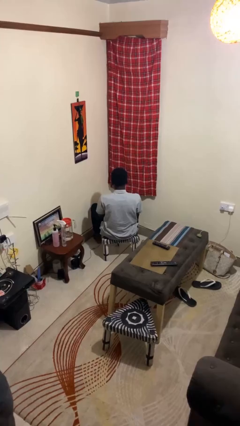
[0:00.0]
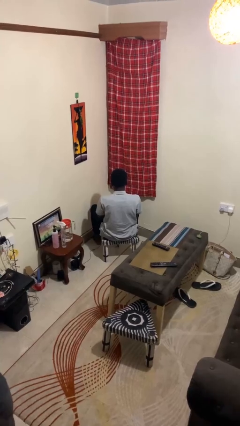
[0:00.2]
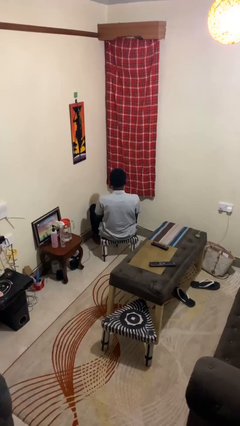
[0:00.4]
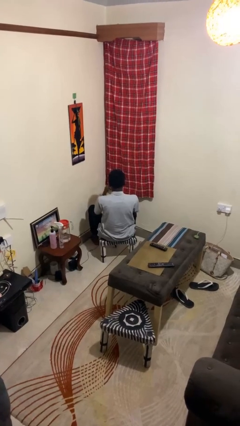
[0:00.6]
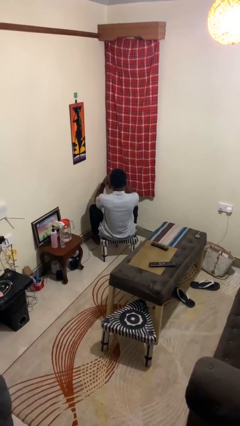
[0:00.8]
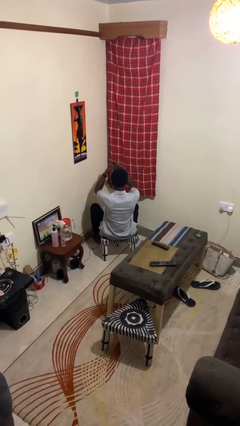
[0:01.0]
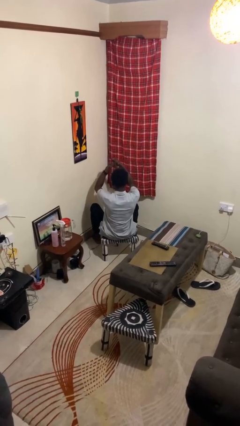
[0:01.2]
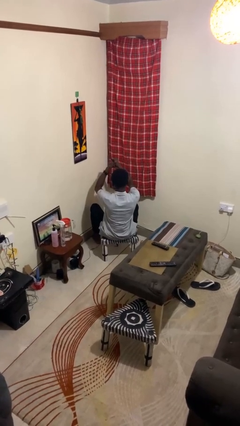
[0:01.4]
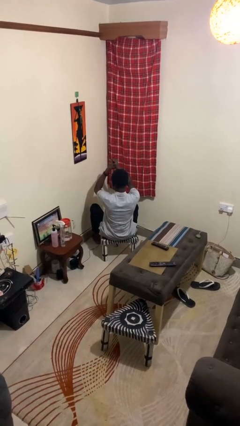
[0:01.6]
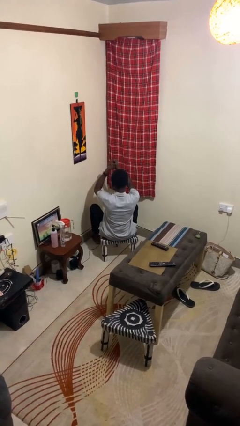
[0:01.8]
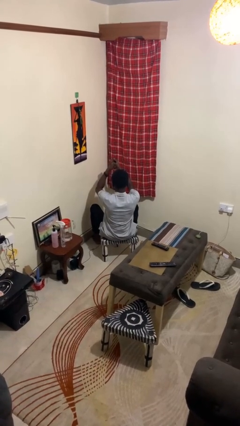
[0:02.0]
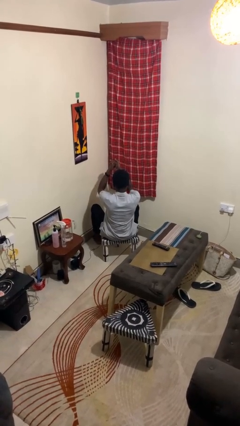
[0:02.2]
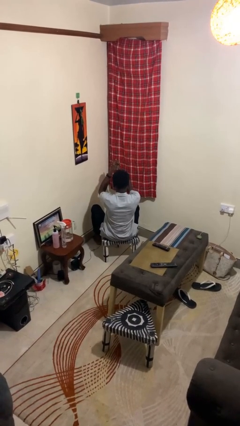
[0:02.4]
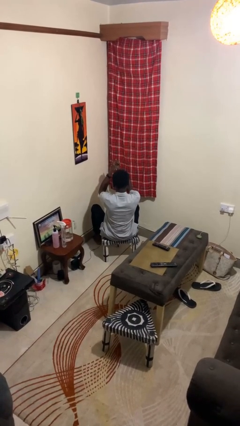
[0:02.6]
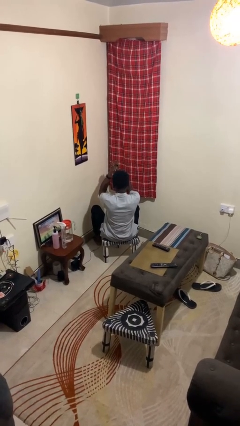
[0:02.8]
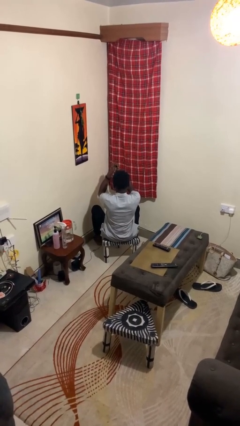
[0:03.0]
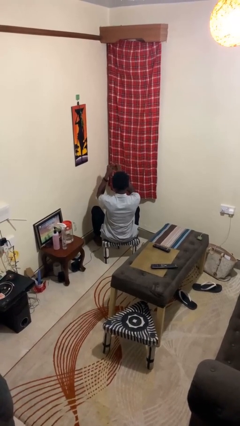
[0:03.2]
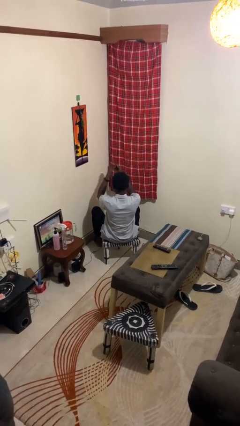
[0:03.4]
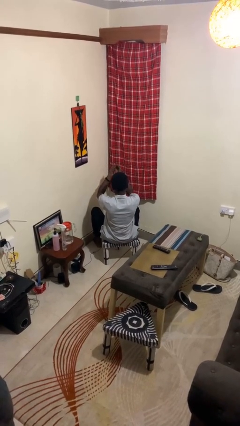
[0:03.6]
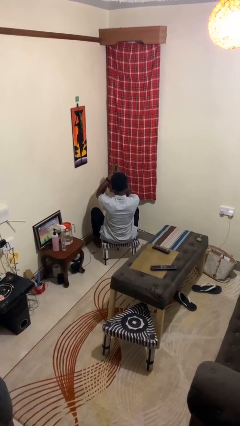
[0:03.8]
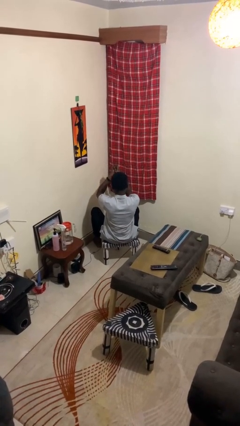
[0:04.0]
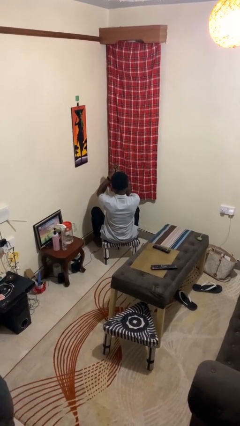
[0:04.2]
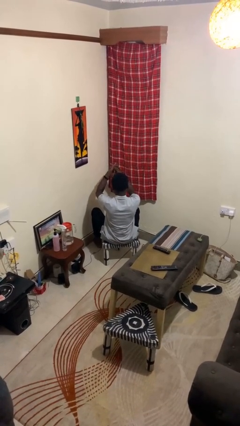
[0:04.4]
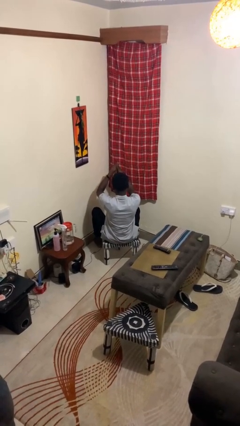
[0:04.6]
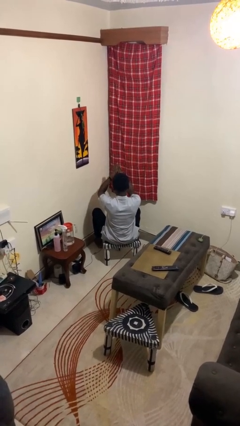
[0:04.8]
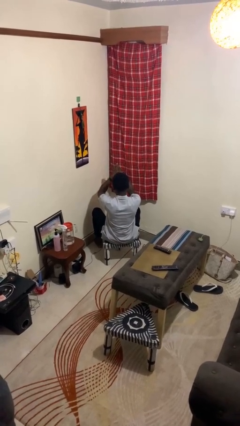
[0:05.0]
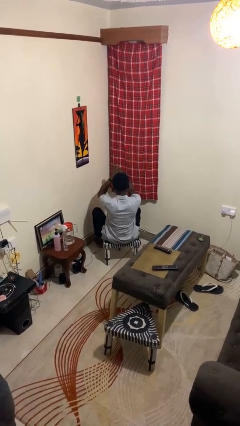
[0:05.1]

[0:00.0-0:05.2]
person cracks knuckles

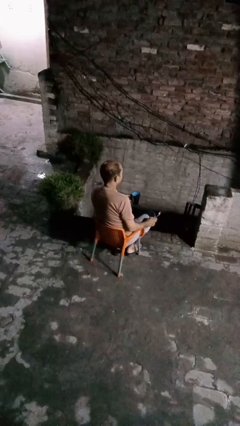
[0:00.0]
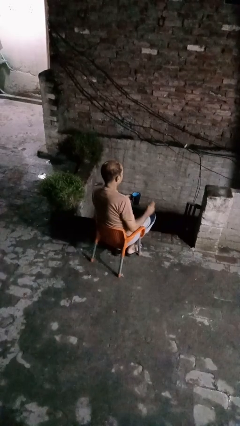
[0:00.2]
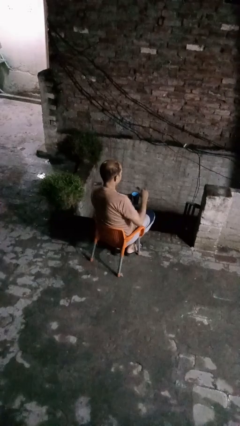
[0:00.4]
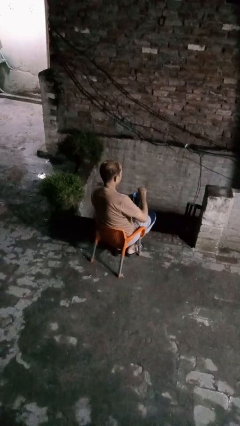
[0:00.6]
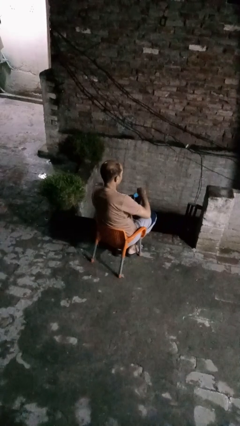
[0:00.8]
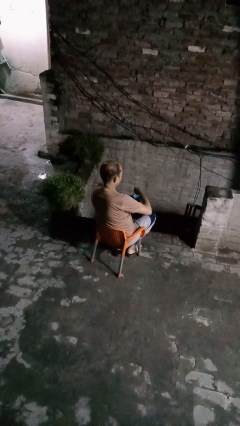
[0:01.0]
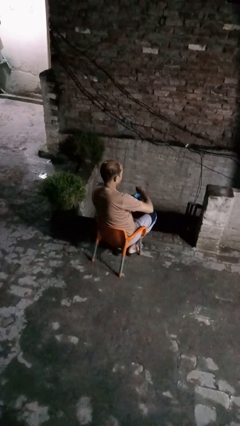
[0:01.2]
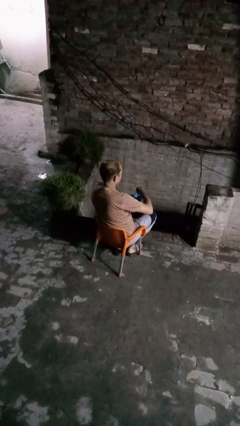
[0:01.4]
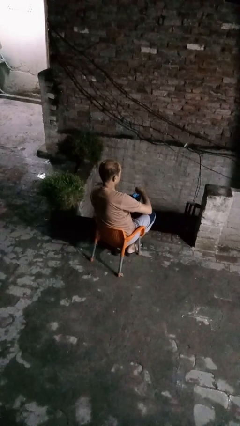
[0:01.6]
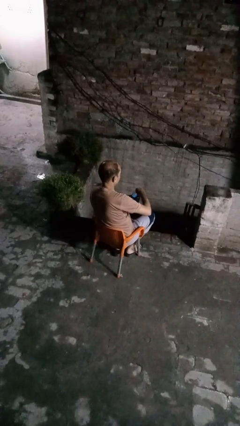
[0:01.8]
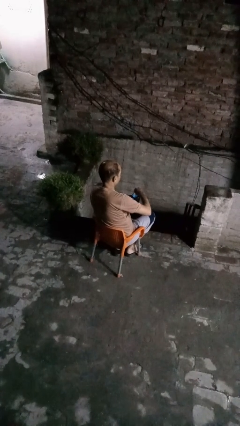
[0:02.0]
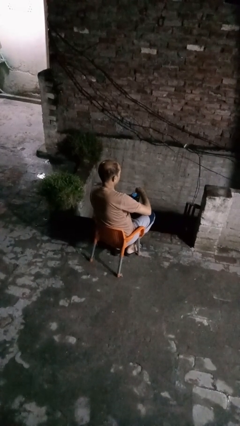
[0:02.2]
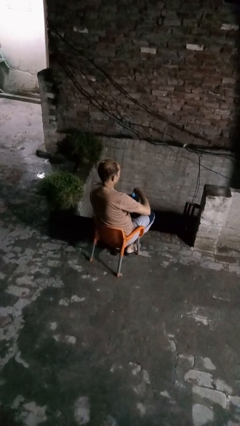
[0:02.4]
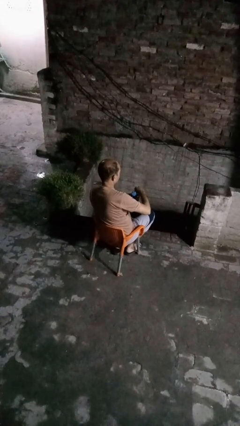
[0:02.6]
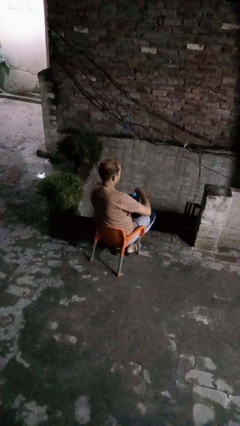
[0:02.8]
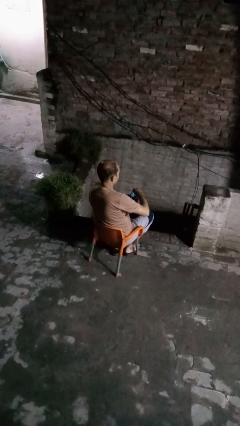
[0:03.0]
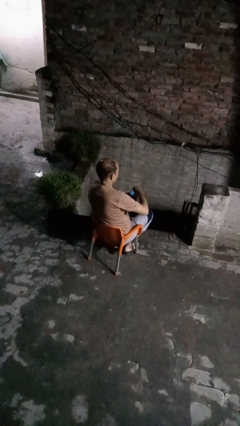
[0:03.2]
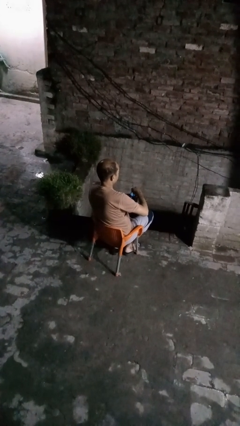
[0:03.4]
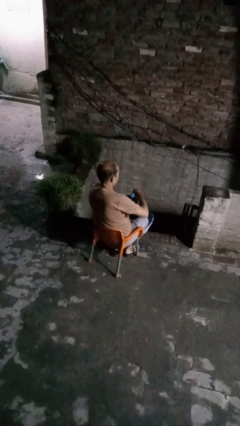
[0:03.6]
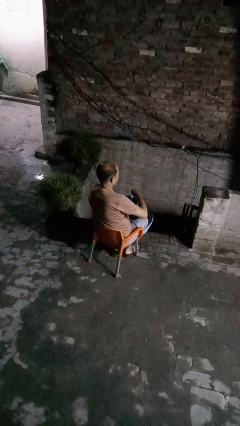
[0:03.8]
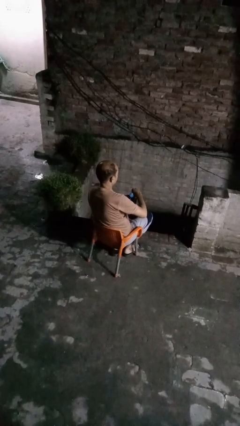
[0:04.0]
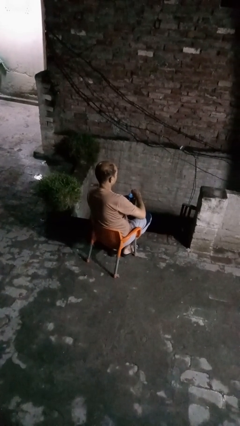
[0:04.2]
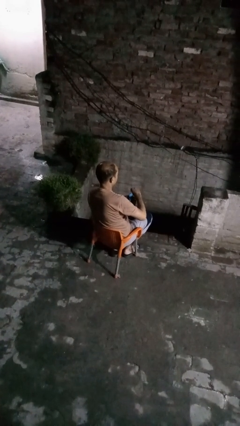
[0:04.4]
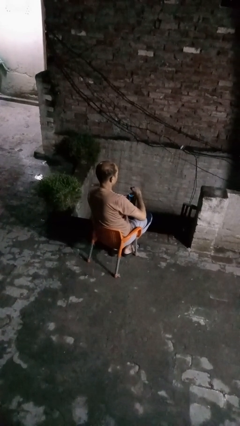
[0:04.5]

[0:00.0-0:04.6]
person stirs mug

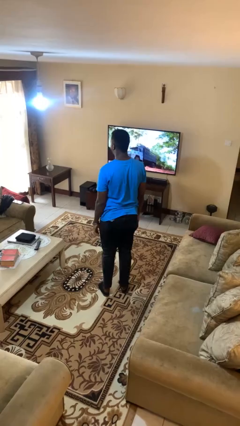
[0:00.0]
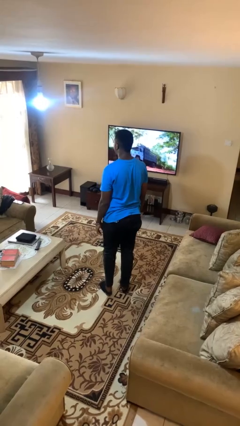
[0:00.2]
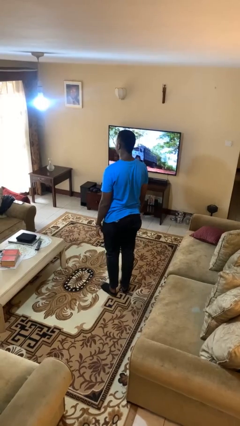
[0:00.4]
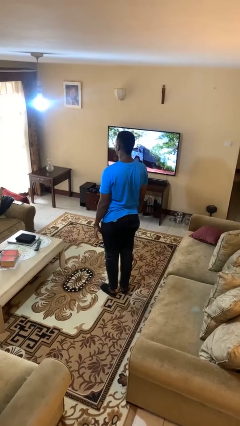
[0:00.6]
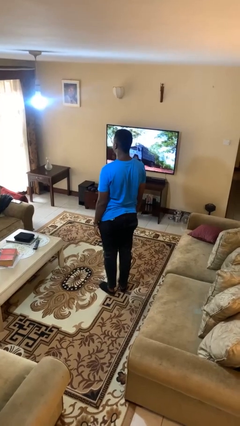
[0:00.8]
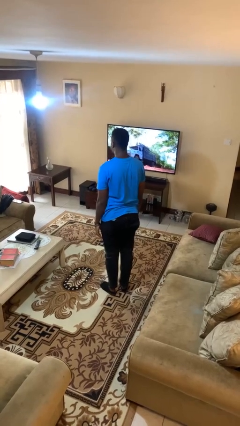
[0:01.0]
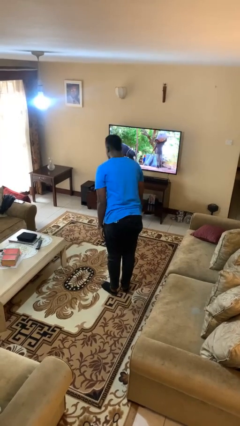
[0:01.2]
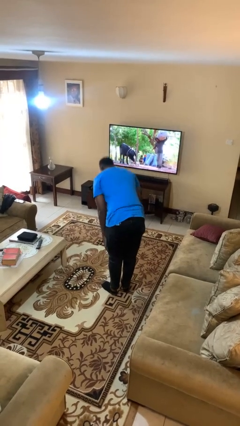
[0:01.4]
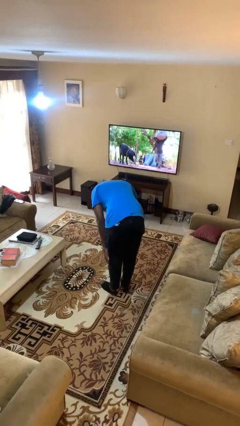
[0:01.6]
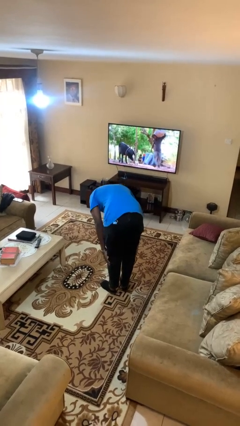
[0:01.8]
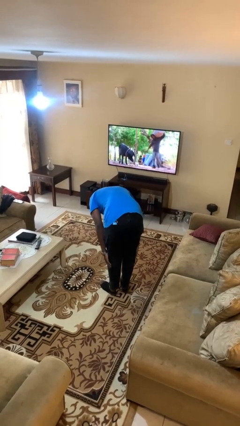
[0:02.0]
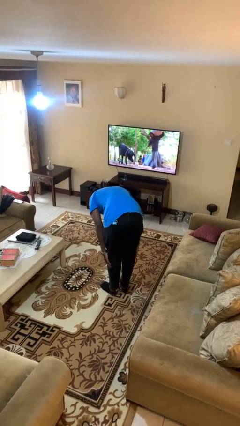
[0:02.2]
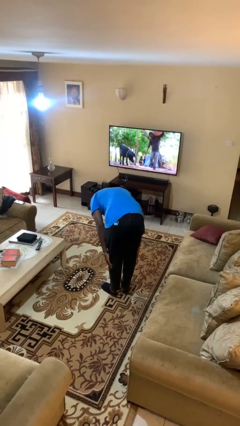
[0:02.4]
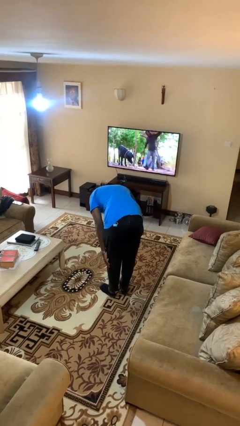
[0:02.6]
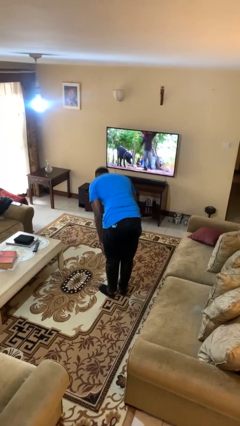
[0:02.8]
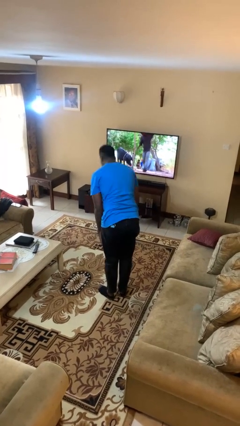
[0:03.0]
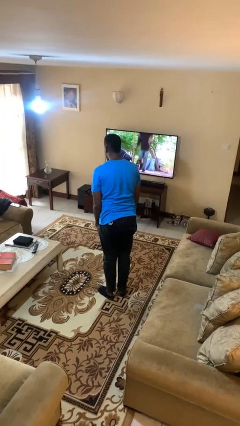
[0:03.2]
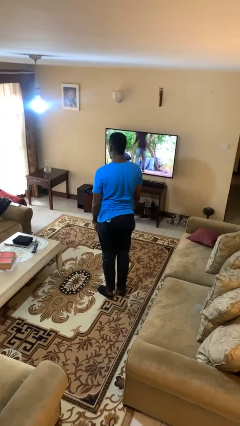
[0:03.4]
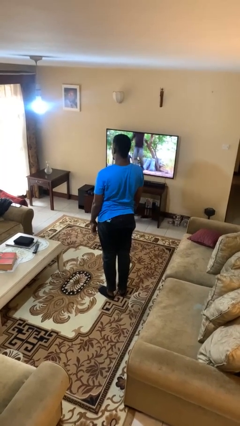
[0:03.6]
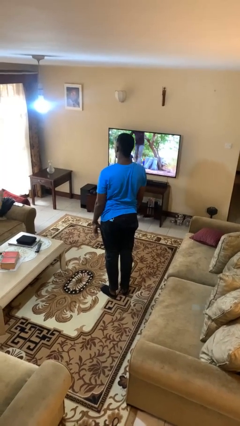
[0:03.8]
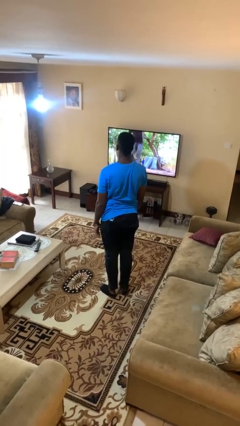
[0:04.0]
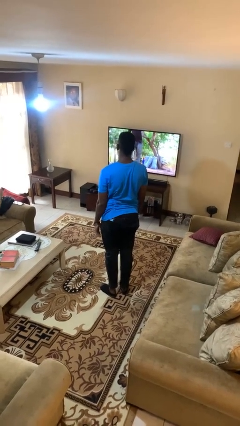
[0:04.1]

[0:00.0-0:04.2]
person bows

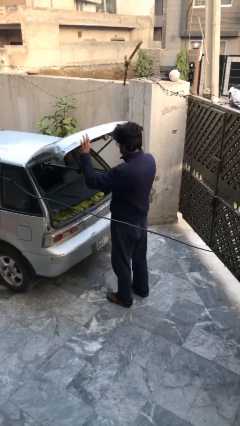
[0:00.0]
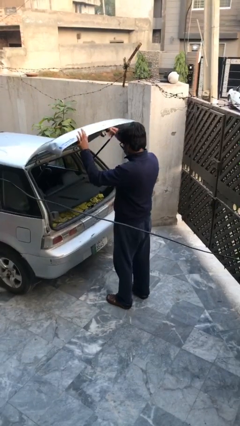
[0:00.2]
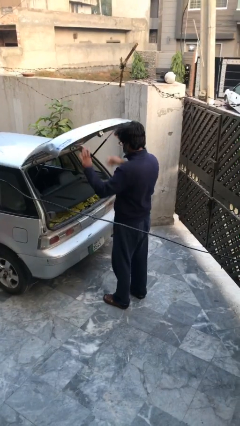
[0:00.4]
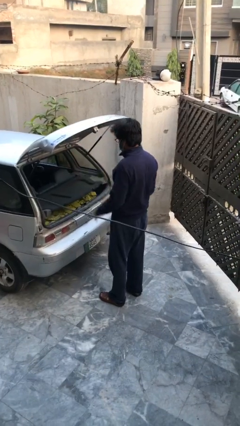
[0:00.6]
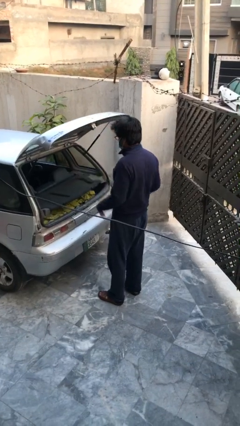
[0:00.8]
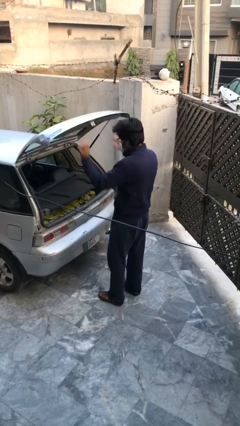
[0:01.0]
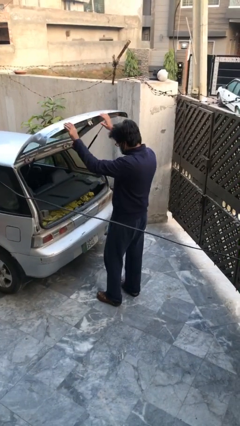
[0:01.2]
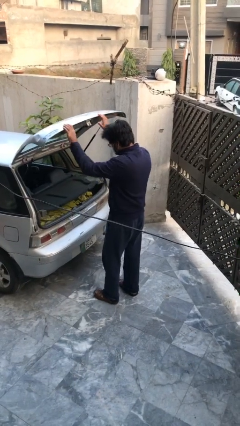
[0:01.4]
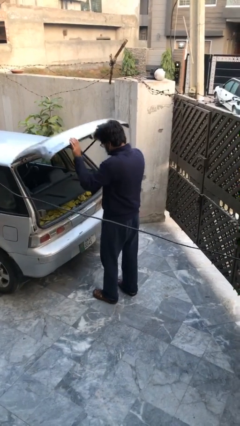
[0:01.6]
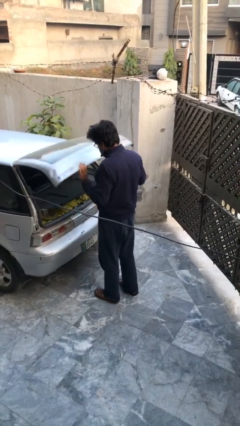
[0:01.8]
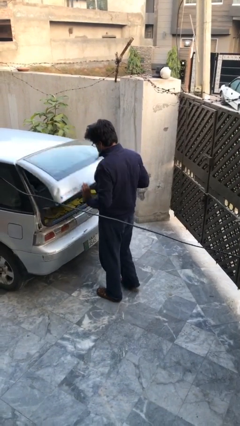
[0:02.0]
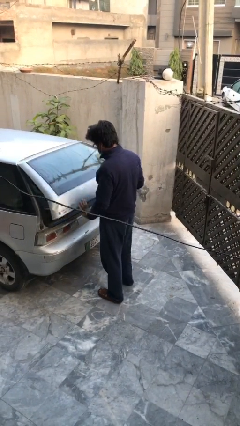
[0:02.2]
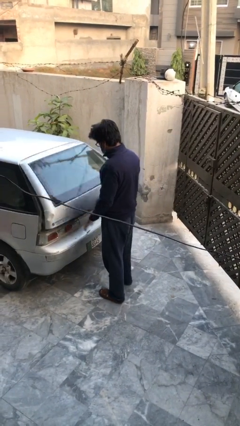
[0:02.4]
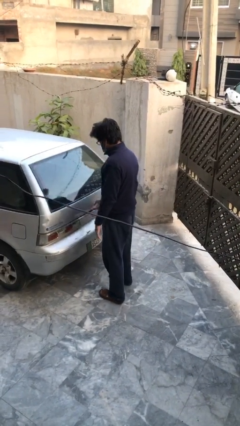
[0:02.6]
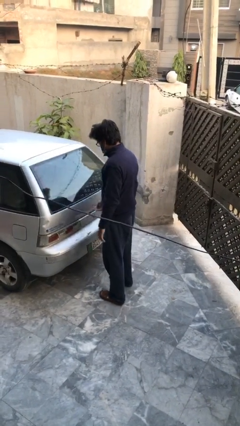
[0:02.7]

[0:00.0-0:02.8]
person closes car trunk

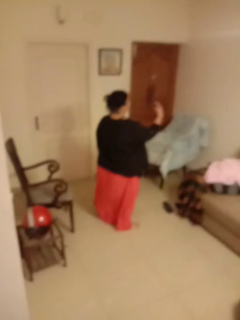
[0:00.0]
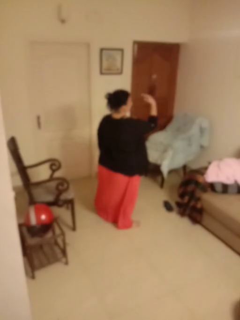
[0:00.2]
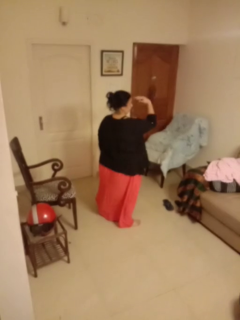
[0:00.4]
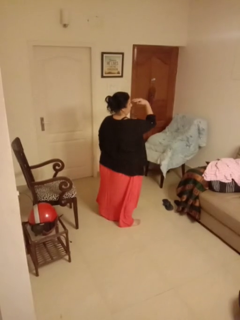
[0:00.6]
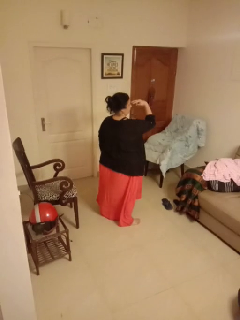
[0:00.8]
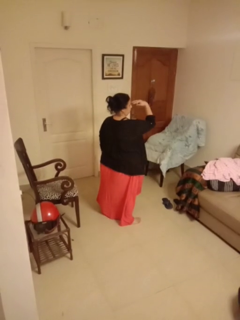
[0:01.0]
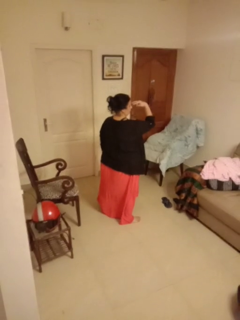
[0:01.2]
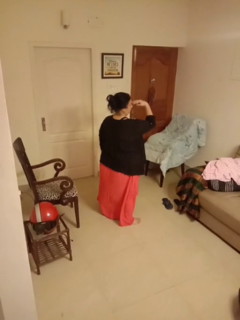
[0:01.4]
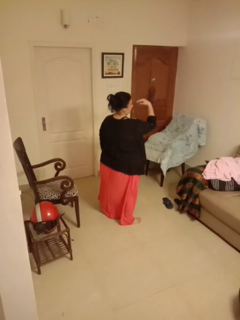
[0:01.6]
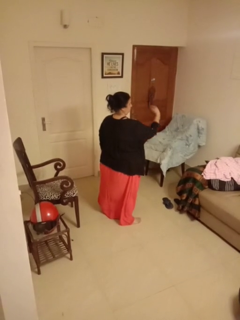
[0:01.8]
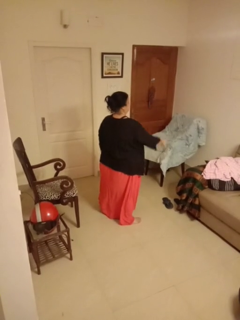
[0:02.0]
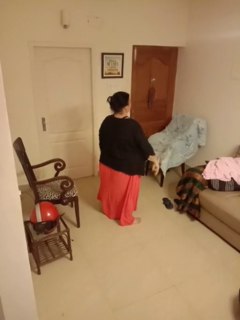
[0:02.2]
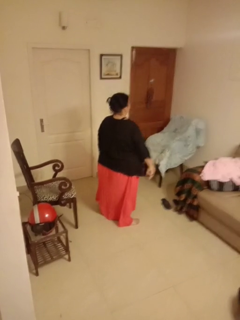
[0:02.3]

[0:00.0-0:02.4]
person gestures watch closely
